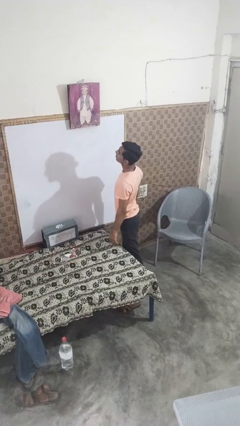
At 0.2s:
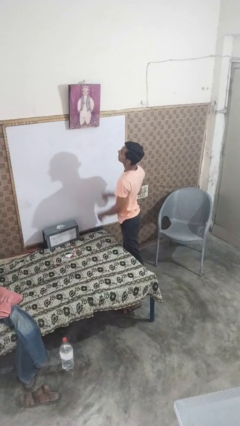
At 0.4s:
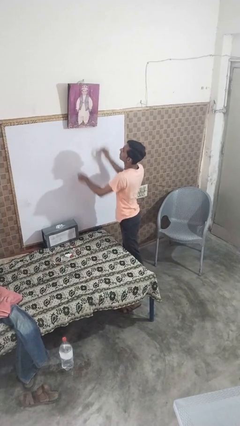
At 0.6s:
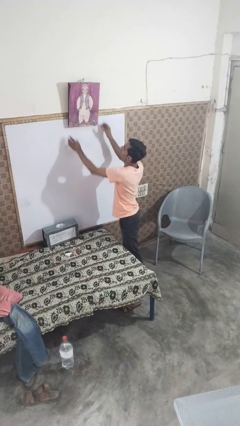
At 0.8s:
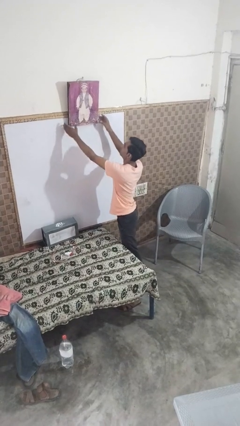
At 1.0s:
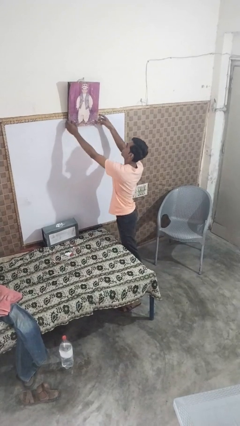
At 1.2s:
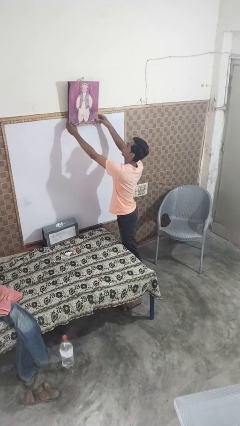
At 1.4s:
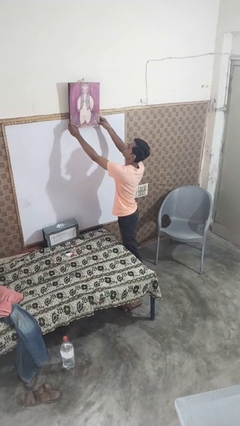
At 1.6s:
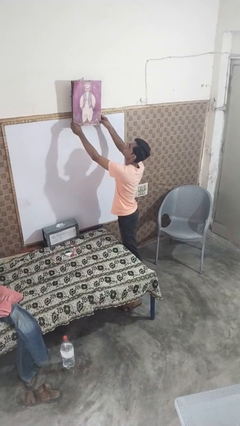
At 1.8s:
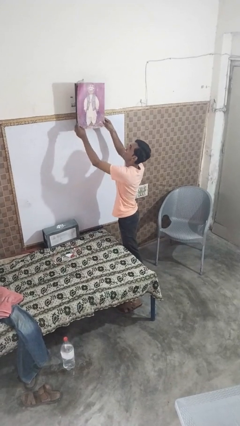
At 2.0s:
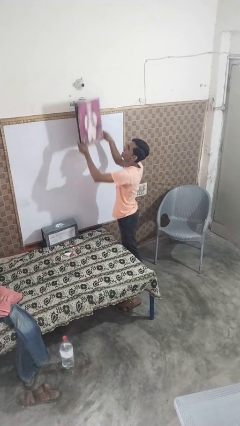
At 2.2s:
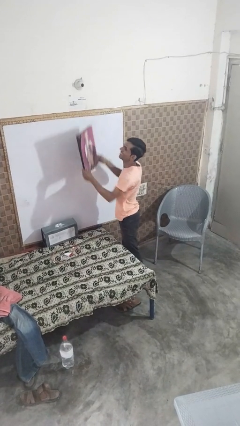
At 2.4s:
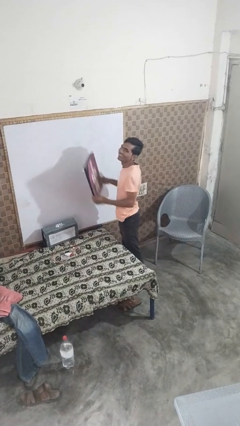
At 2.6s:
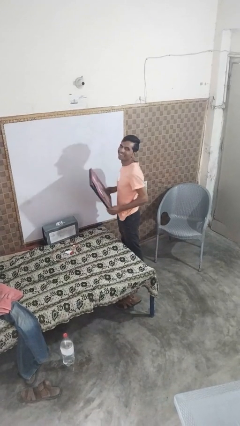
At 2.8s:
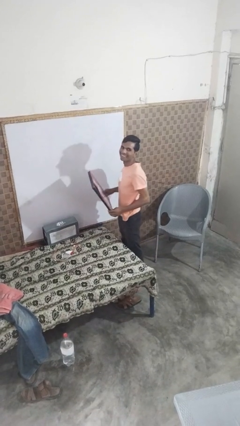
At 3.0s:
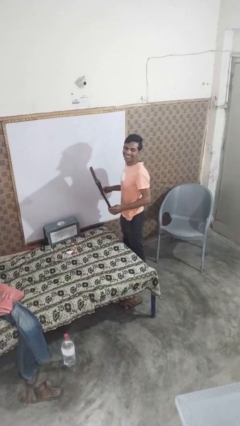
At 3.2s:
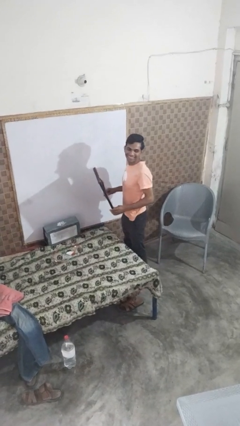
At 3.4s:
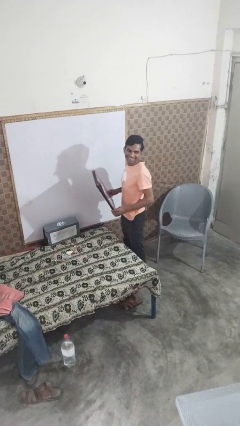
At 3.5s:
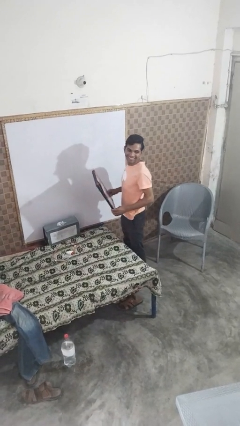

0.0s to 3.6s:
person takes down picture frame

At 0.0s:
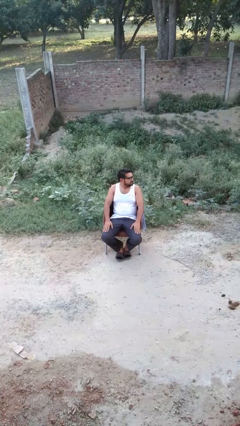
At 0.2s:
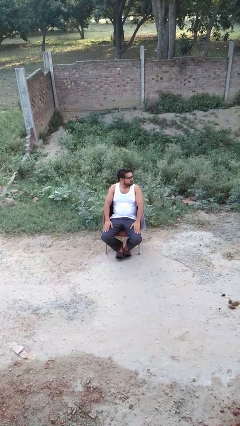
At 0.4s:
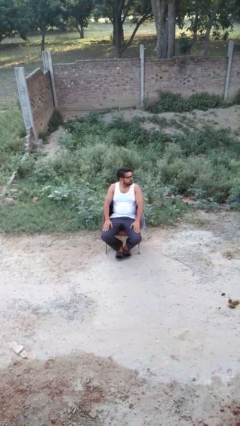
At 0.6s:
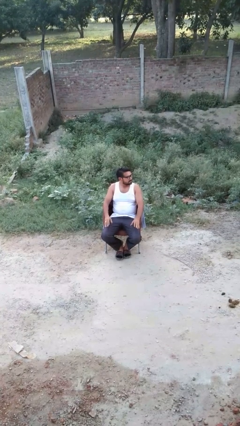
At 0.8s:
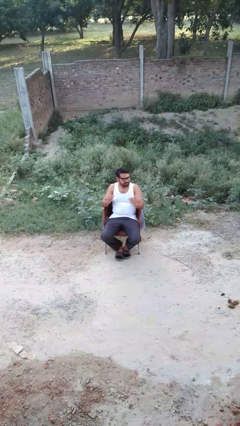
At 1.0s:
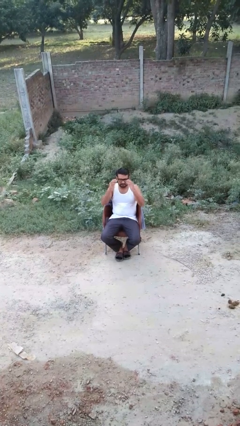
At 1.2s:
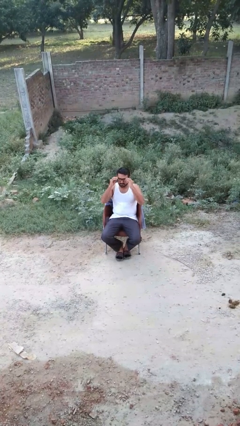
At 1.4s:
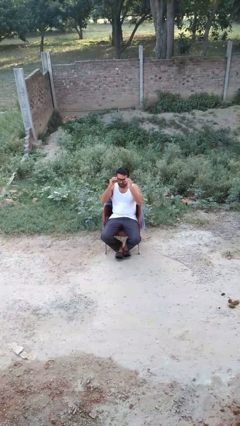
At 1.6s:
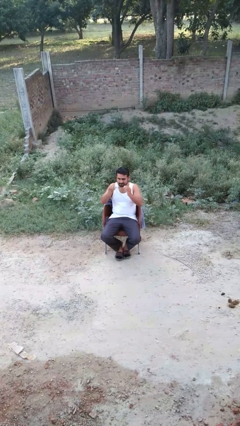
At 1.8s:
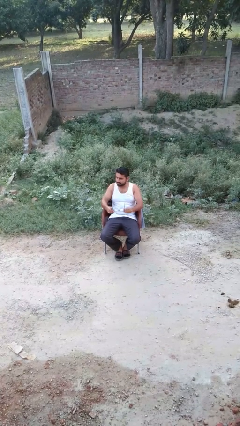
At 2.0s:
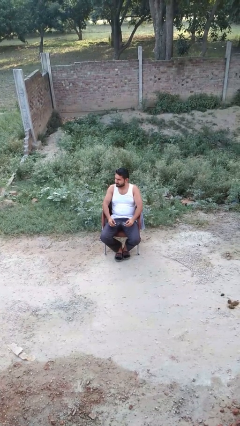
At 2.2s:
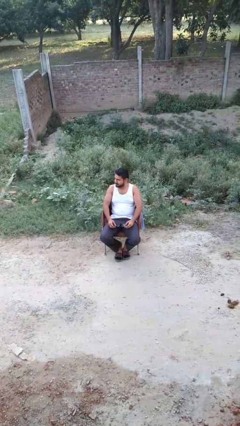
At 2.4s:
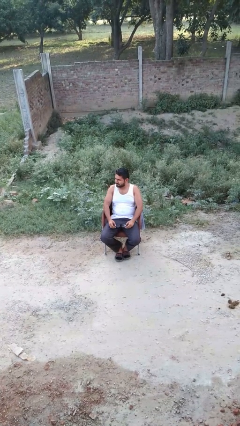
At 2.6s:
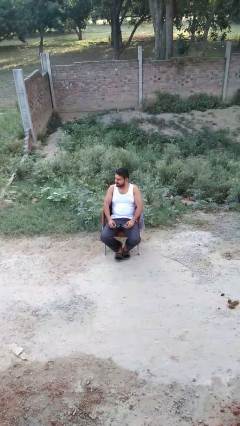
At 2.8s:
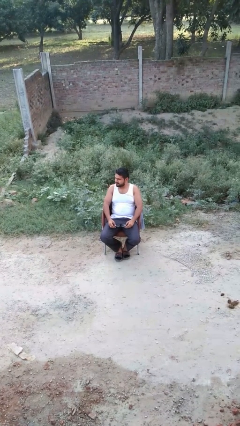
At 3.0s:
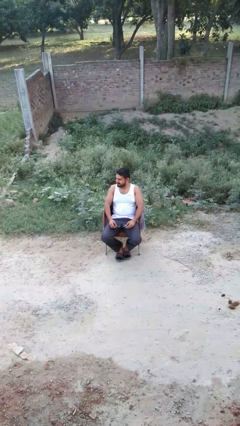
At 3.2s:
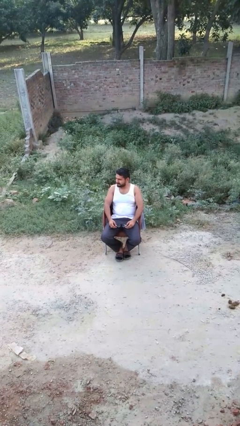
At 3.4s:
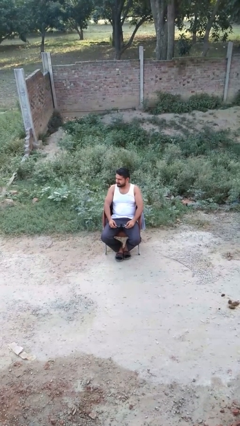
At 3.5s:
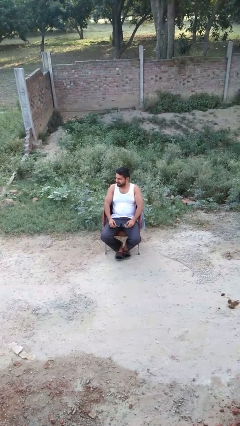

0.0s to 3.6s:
person takes off glasses

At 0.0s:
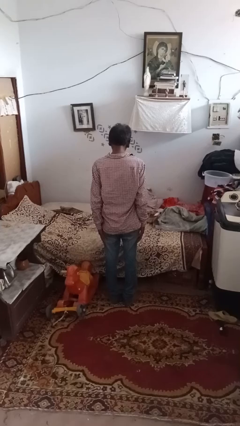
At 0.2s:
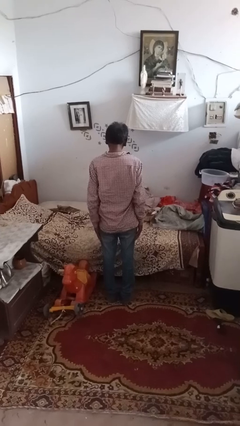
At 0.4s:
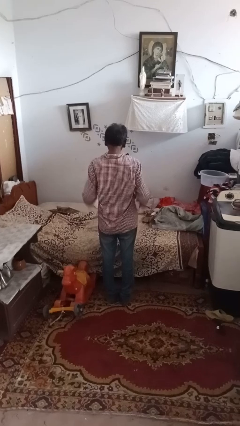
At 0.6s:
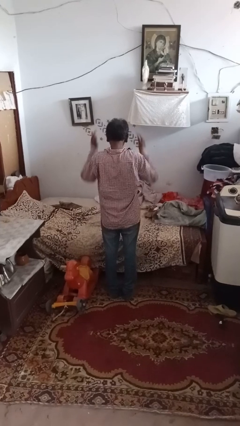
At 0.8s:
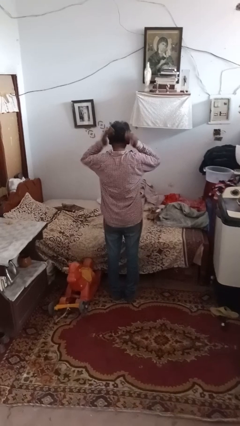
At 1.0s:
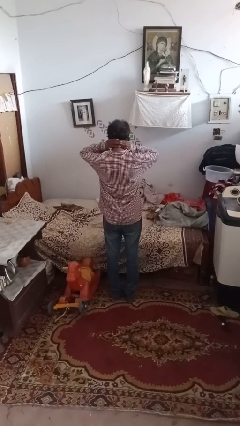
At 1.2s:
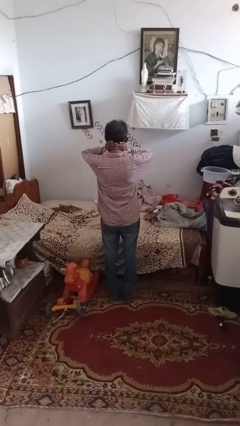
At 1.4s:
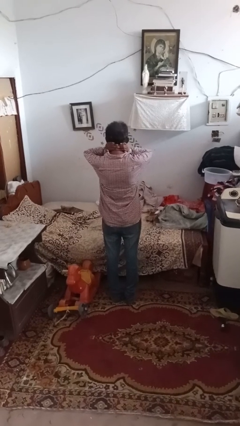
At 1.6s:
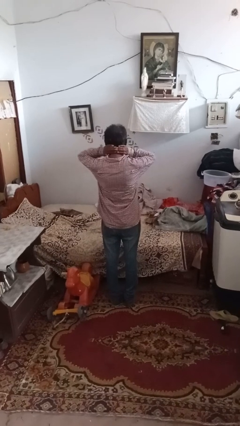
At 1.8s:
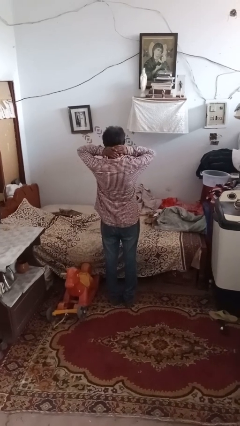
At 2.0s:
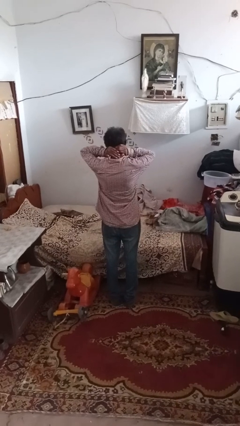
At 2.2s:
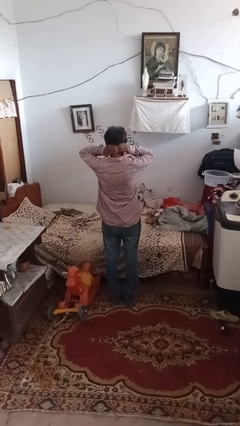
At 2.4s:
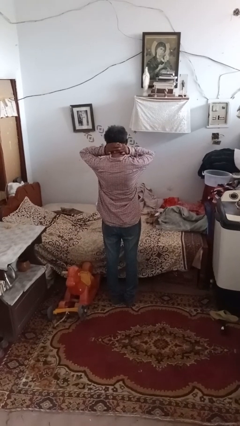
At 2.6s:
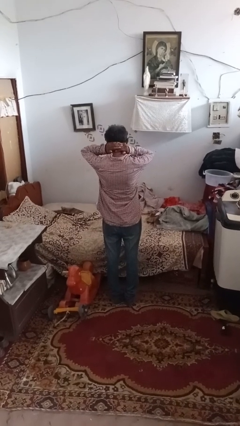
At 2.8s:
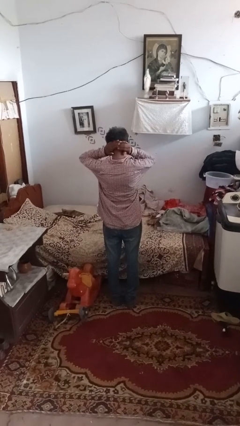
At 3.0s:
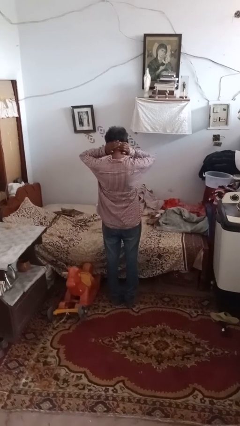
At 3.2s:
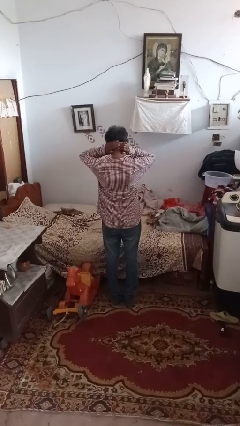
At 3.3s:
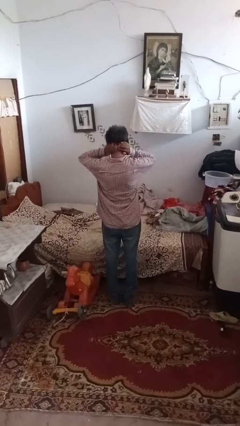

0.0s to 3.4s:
person rubs neck

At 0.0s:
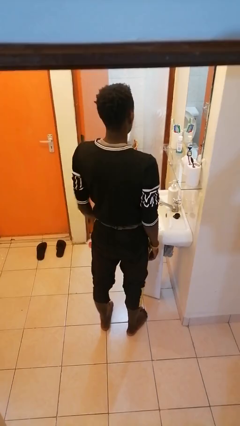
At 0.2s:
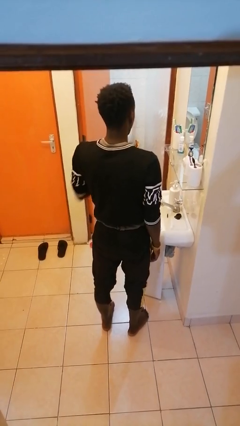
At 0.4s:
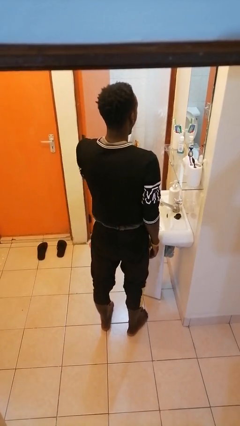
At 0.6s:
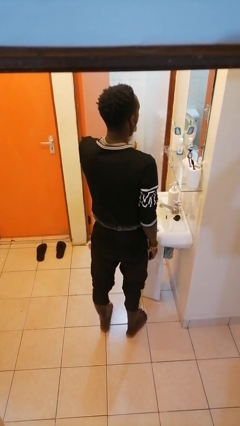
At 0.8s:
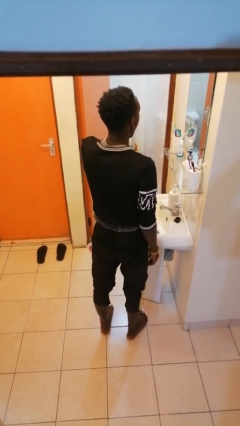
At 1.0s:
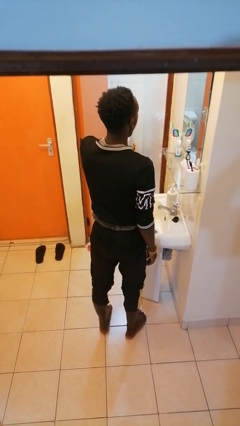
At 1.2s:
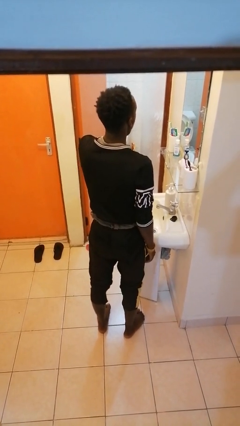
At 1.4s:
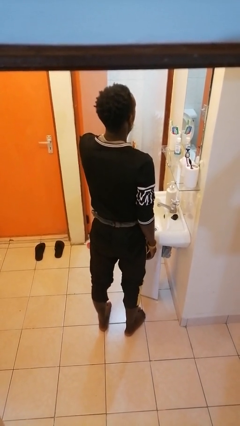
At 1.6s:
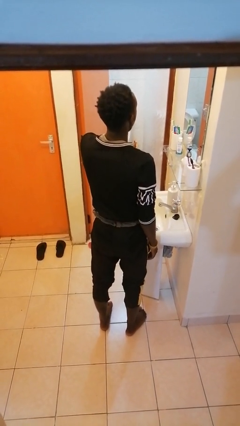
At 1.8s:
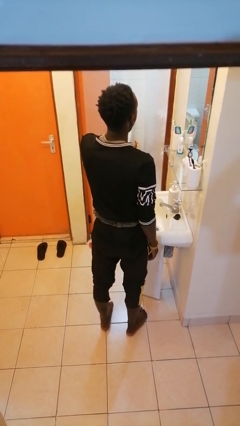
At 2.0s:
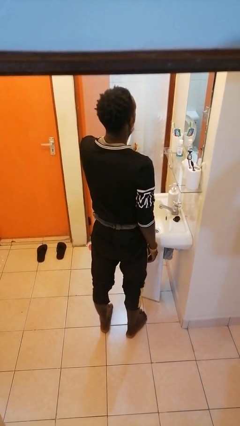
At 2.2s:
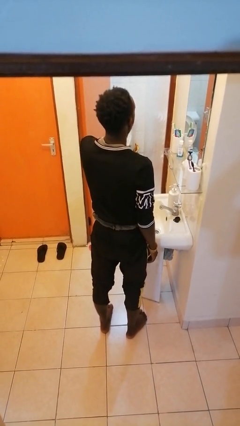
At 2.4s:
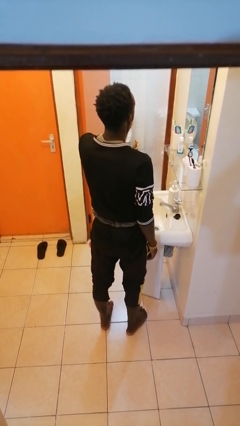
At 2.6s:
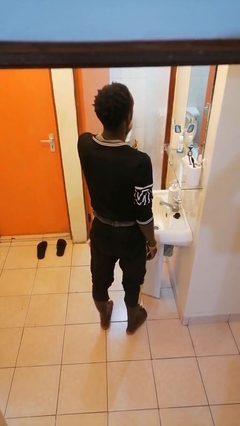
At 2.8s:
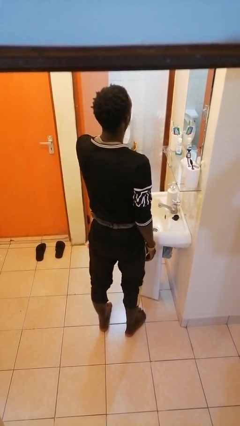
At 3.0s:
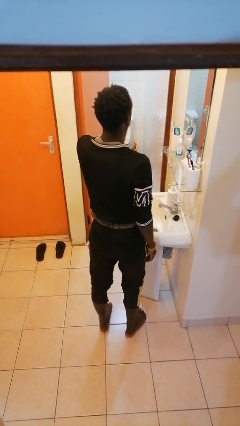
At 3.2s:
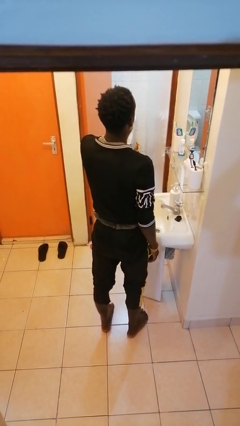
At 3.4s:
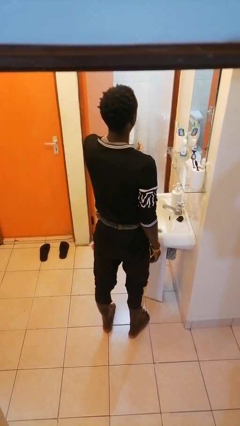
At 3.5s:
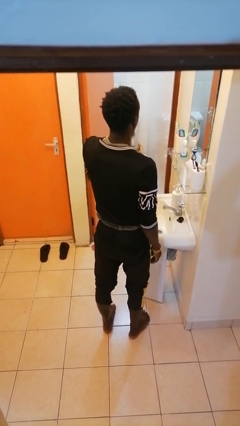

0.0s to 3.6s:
person brushes teeth

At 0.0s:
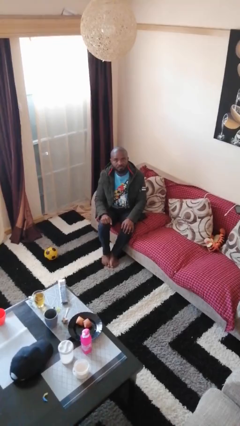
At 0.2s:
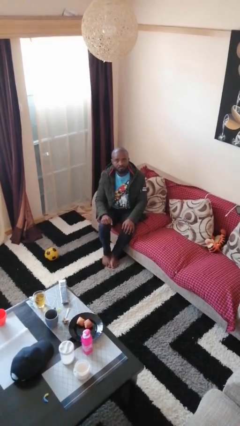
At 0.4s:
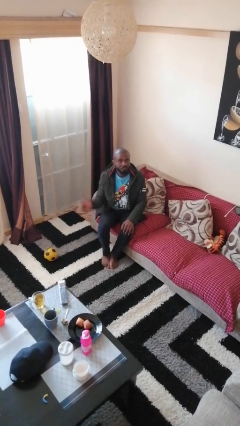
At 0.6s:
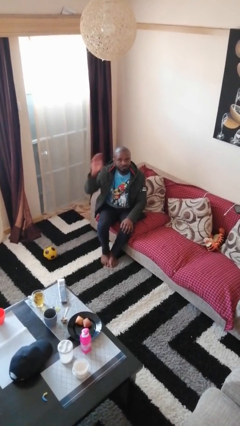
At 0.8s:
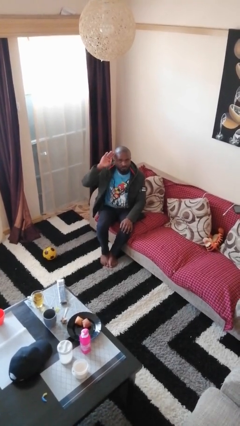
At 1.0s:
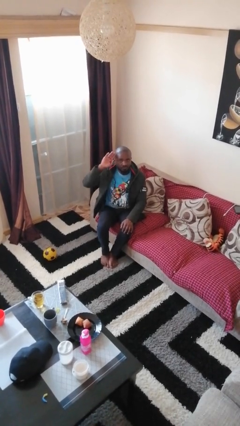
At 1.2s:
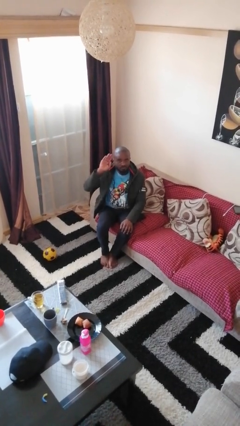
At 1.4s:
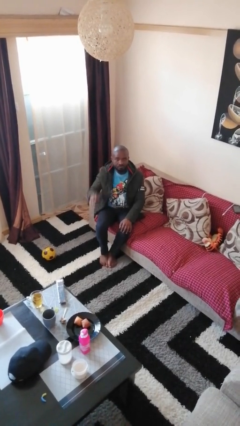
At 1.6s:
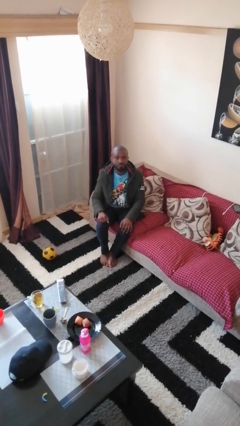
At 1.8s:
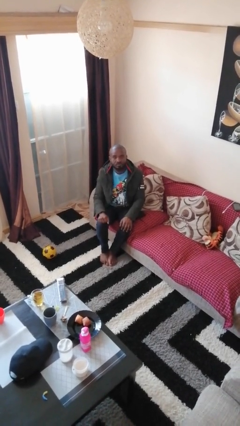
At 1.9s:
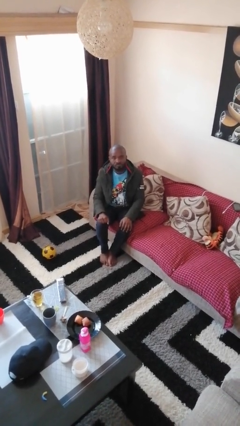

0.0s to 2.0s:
person salutes

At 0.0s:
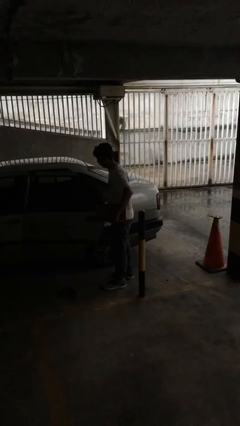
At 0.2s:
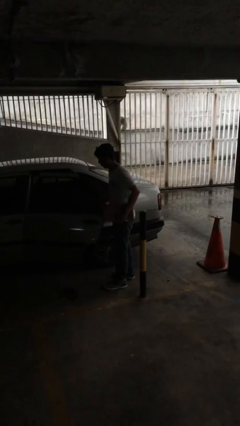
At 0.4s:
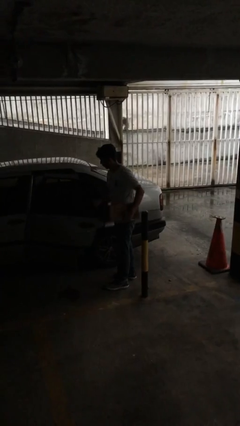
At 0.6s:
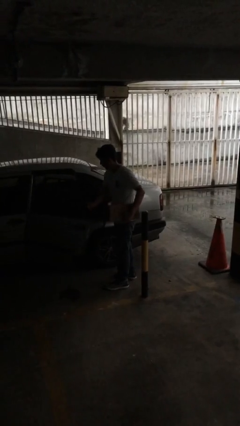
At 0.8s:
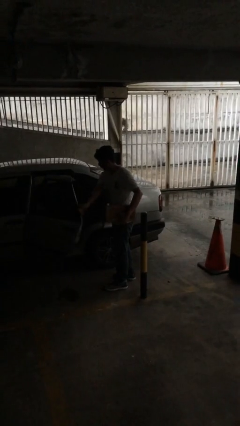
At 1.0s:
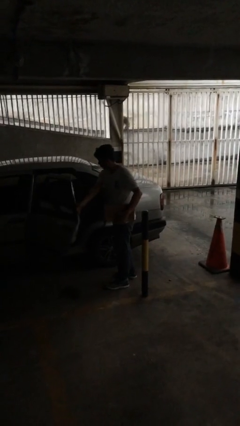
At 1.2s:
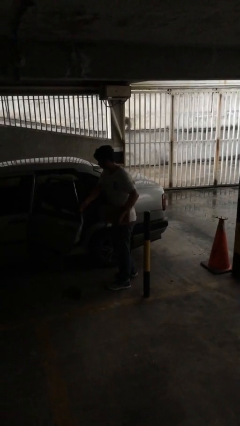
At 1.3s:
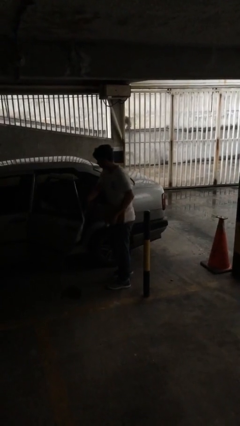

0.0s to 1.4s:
person opens car door
